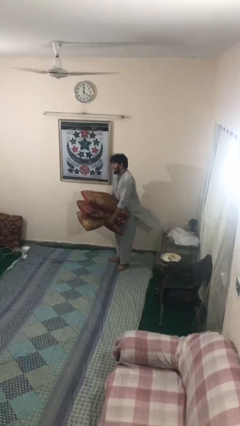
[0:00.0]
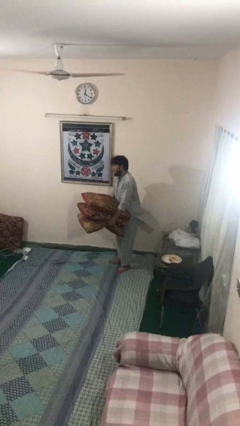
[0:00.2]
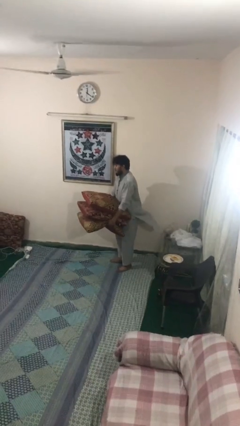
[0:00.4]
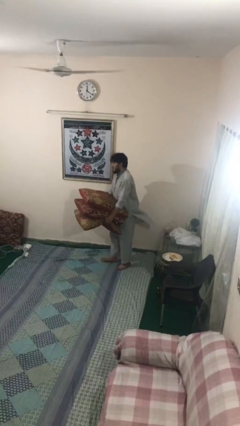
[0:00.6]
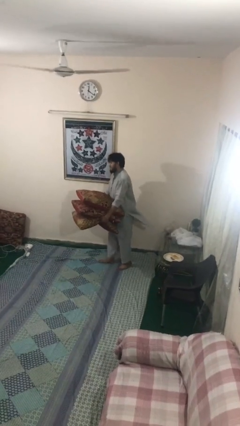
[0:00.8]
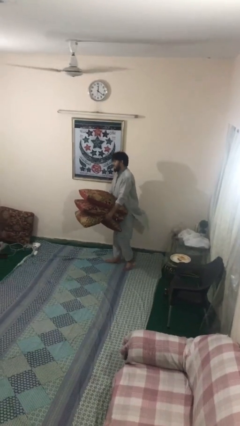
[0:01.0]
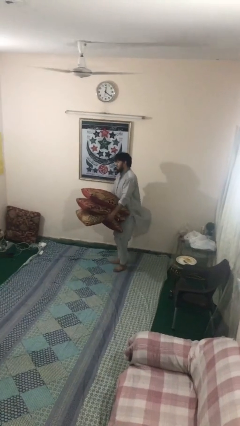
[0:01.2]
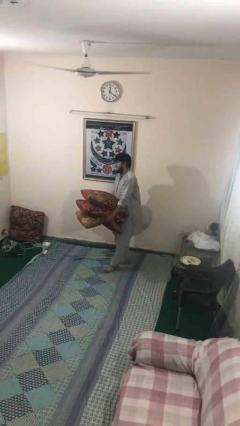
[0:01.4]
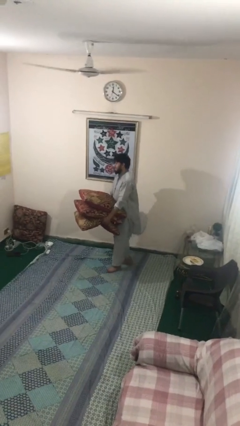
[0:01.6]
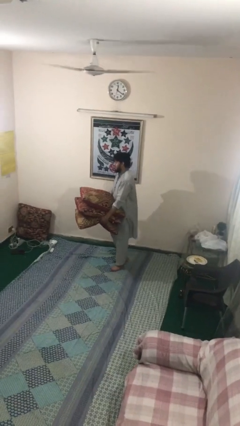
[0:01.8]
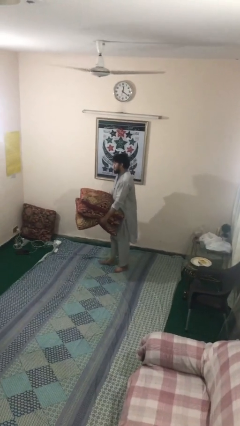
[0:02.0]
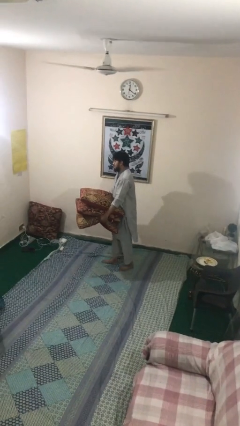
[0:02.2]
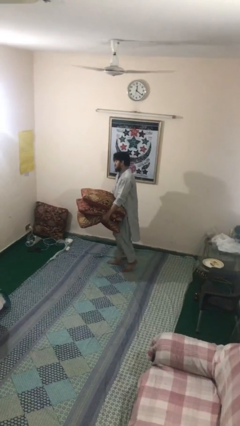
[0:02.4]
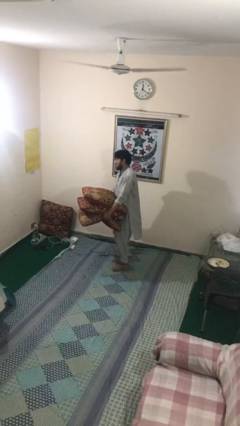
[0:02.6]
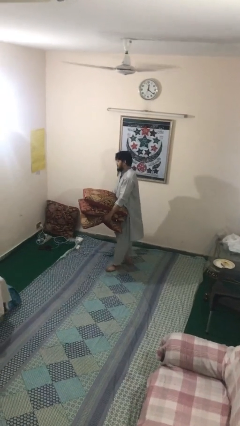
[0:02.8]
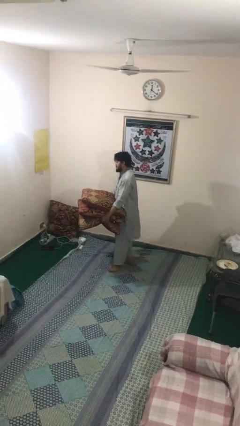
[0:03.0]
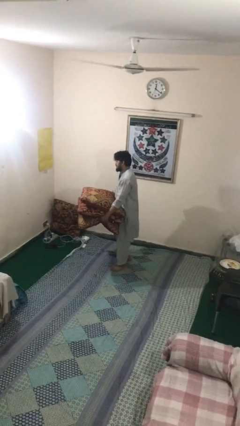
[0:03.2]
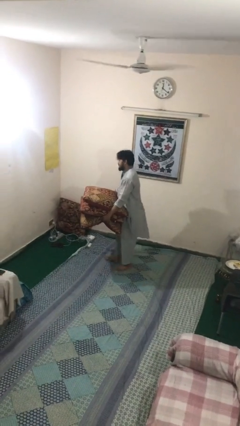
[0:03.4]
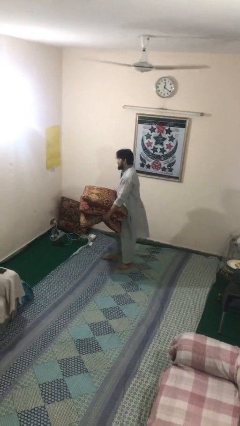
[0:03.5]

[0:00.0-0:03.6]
person carries heavy object

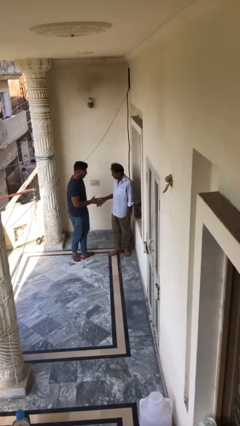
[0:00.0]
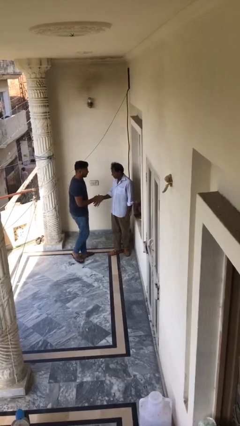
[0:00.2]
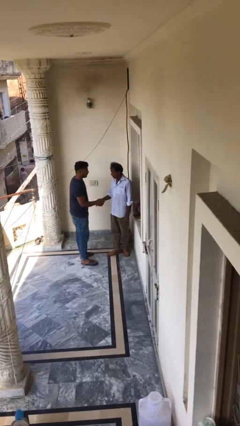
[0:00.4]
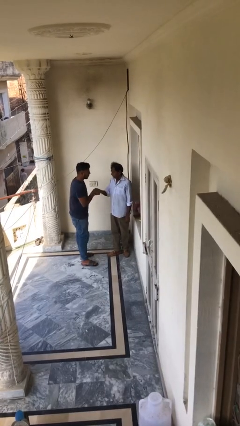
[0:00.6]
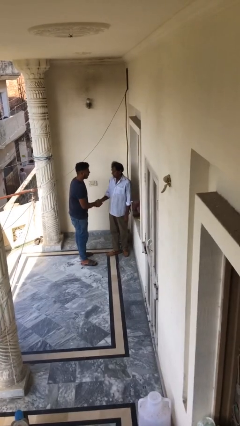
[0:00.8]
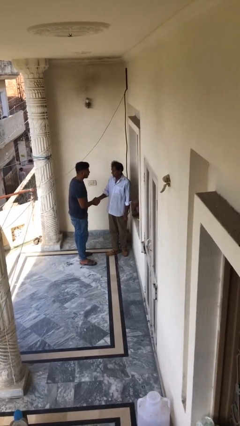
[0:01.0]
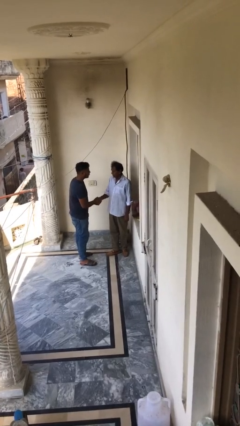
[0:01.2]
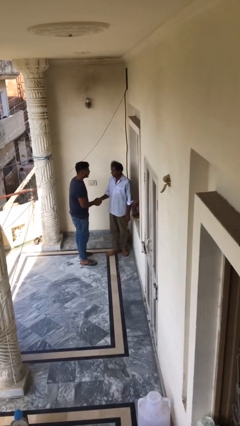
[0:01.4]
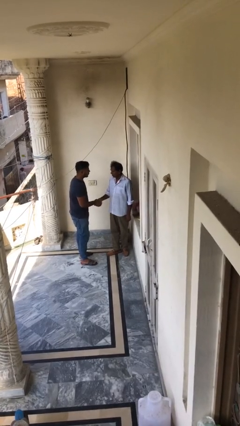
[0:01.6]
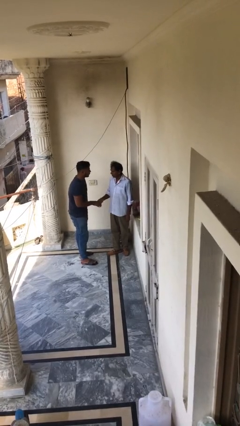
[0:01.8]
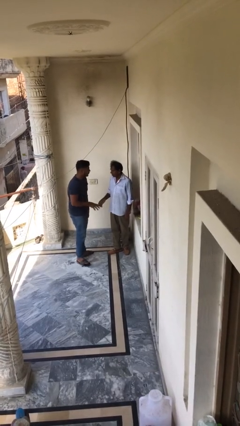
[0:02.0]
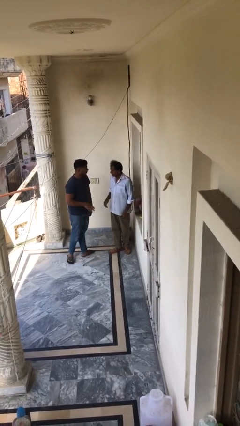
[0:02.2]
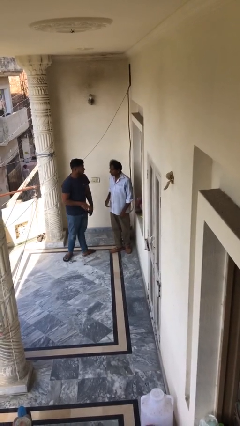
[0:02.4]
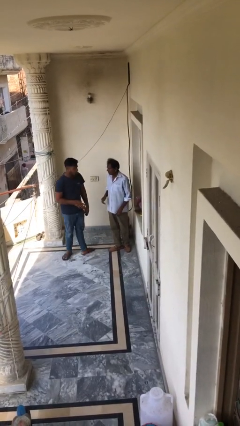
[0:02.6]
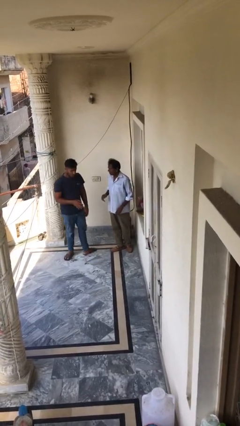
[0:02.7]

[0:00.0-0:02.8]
person shakes hand

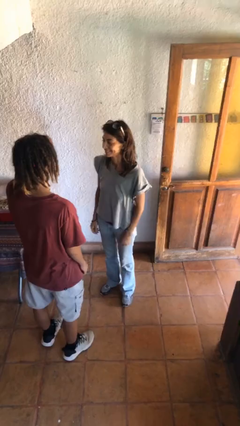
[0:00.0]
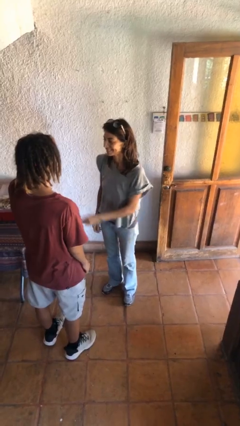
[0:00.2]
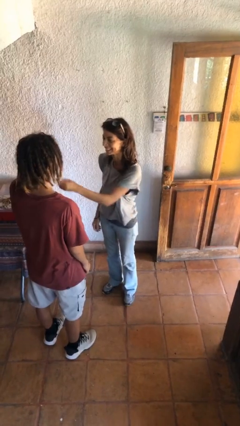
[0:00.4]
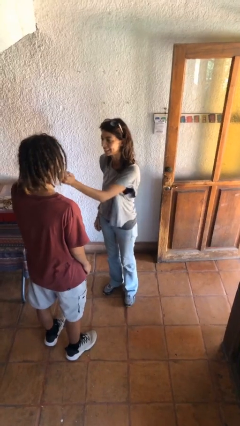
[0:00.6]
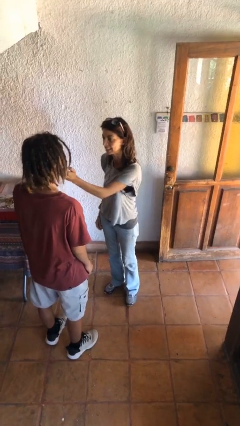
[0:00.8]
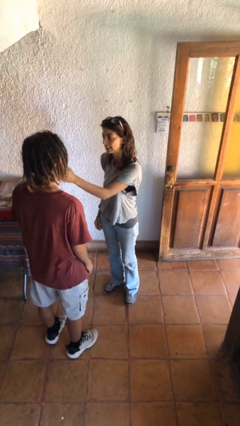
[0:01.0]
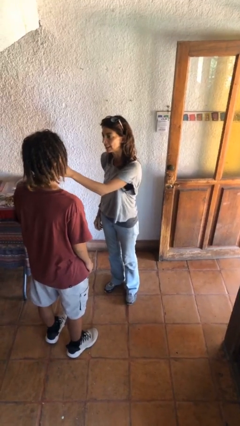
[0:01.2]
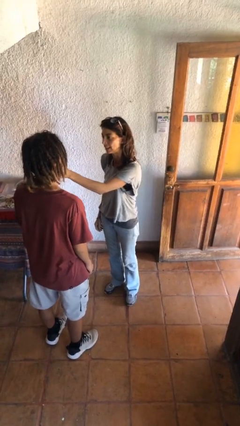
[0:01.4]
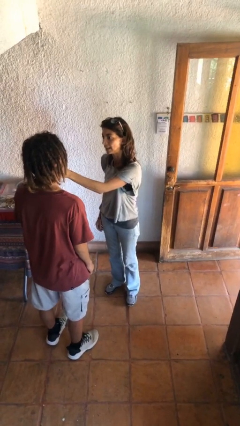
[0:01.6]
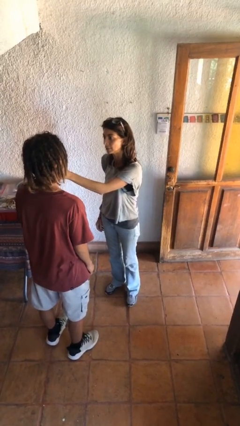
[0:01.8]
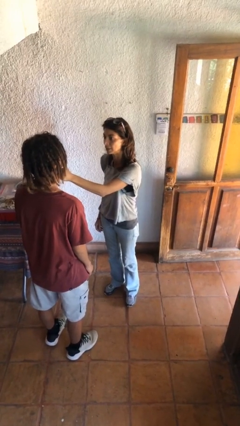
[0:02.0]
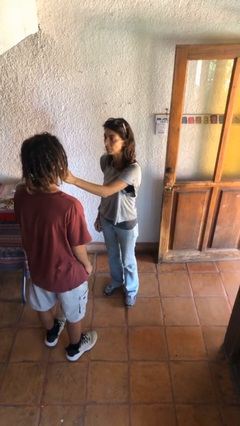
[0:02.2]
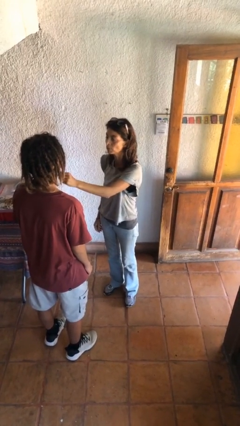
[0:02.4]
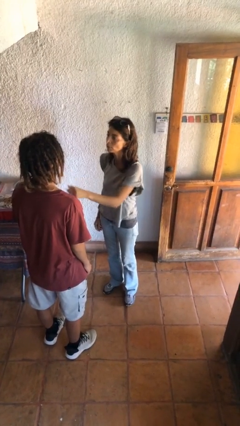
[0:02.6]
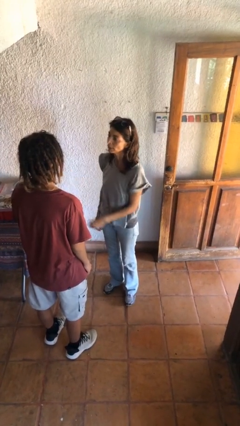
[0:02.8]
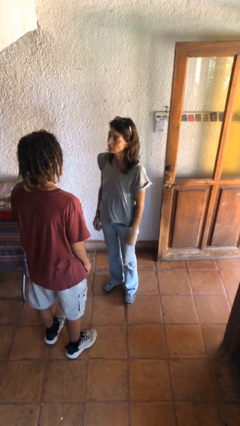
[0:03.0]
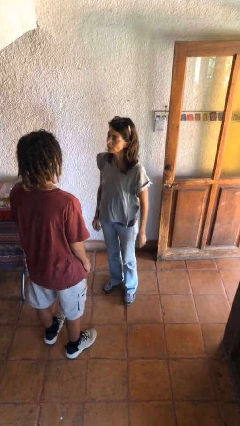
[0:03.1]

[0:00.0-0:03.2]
person touches face of person

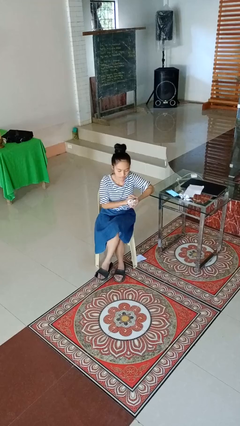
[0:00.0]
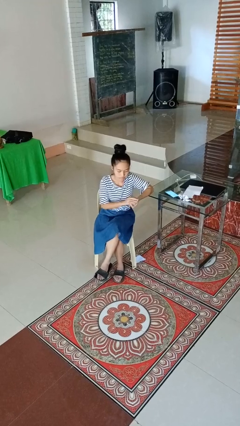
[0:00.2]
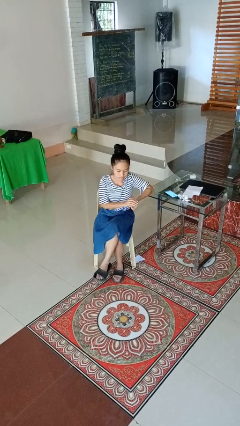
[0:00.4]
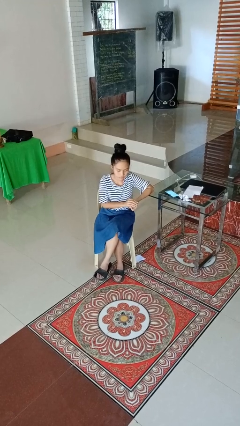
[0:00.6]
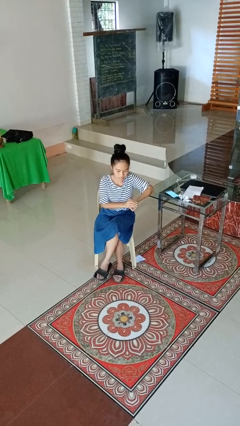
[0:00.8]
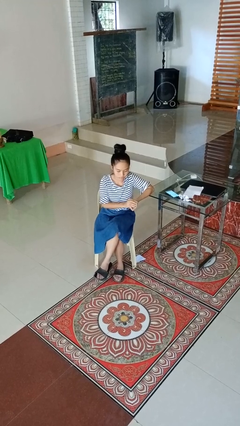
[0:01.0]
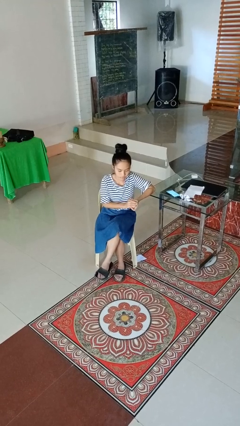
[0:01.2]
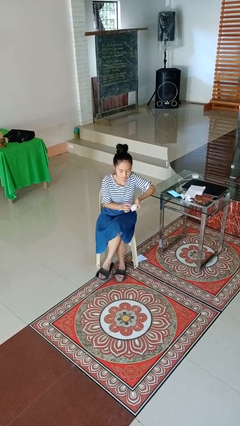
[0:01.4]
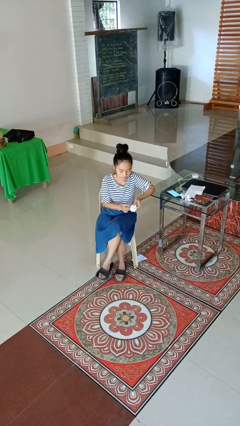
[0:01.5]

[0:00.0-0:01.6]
person crumples paper

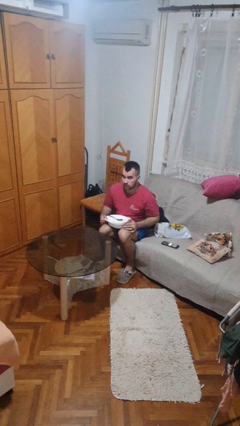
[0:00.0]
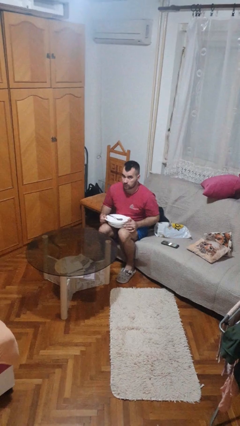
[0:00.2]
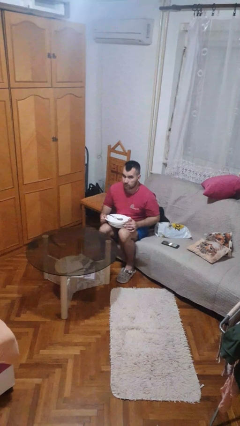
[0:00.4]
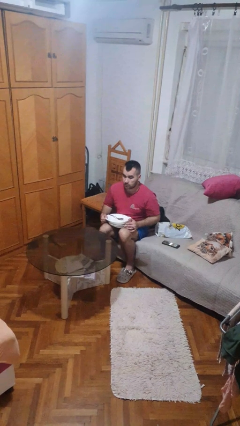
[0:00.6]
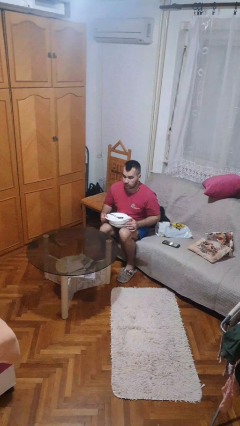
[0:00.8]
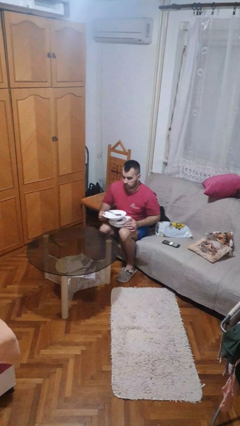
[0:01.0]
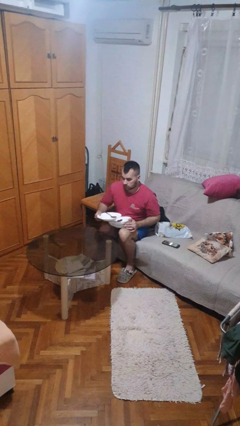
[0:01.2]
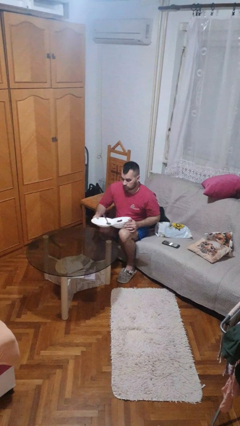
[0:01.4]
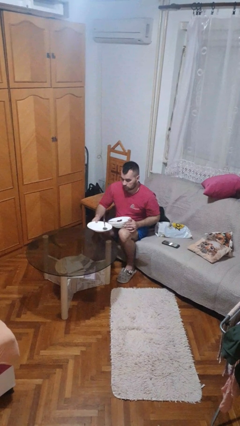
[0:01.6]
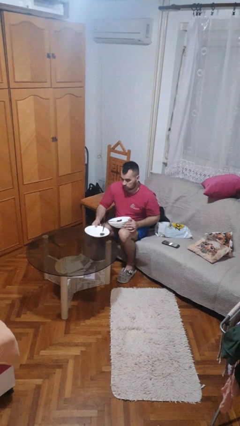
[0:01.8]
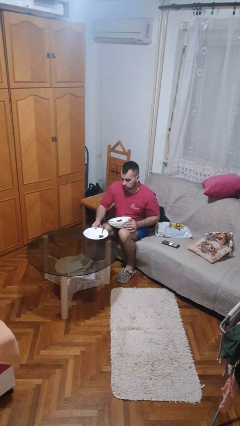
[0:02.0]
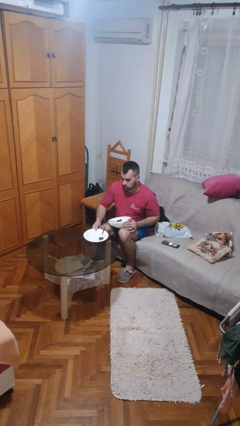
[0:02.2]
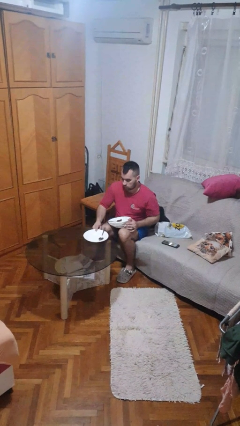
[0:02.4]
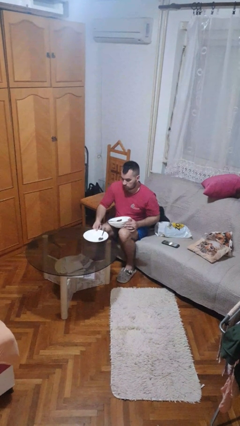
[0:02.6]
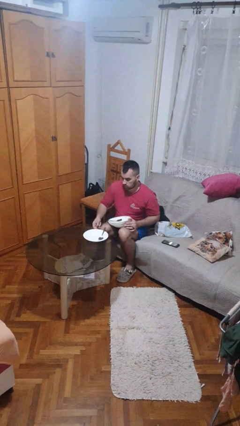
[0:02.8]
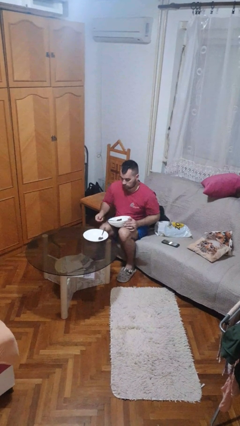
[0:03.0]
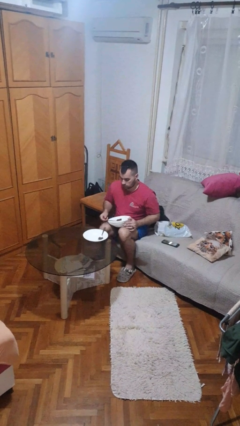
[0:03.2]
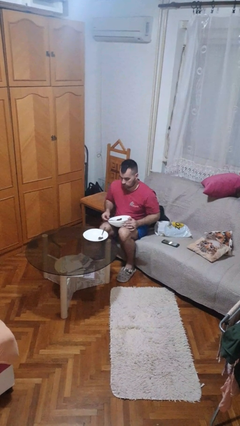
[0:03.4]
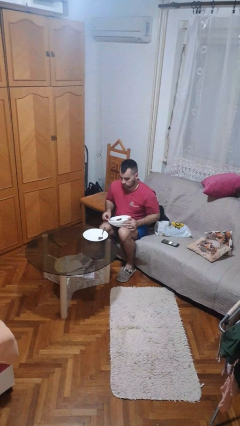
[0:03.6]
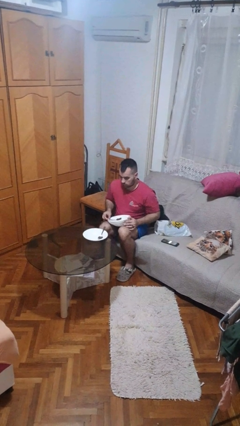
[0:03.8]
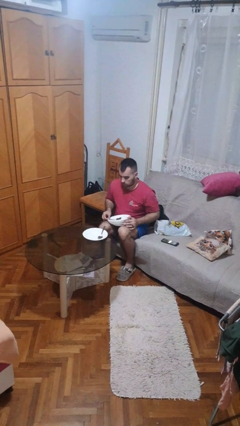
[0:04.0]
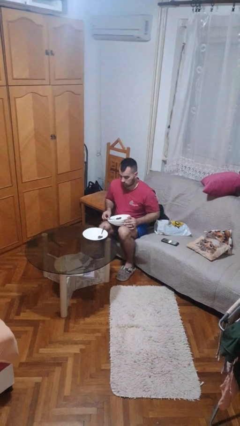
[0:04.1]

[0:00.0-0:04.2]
person sets table

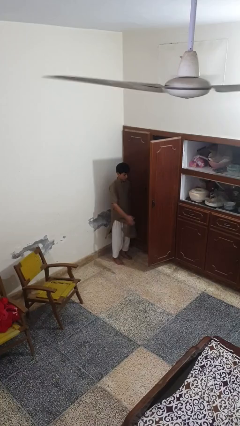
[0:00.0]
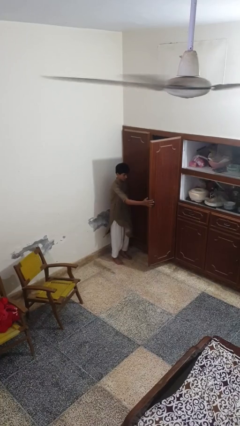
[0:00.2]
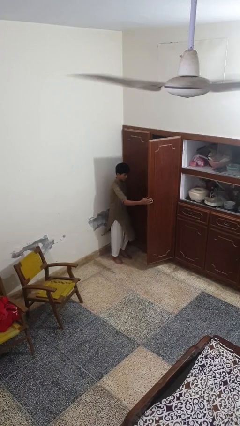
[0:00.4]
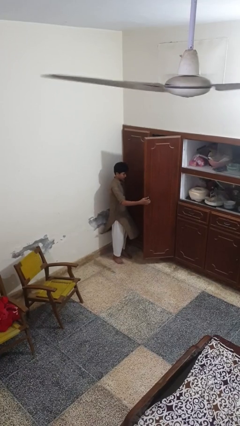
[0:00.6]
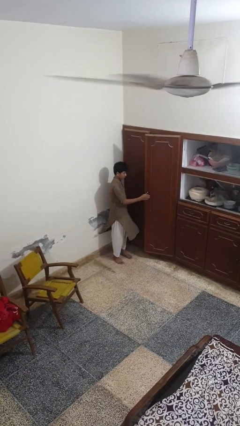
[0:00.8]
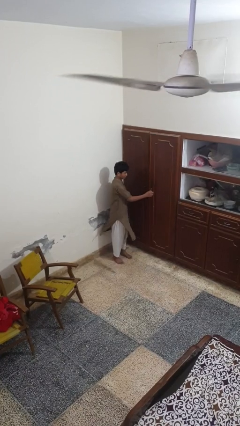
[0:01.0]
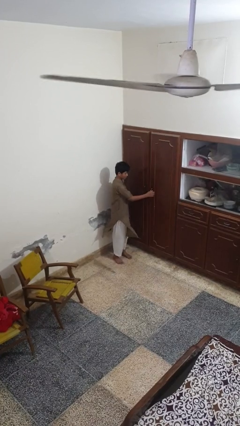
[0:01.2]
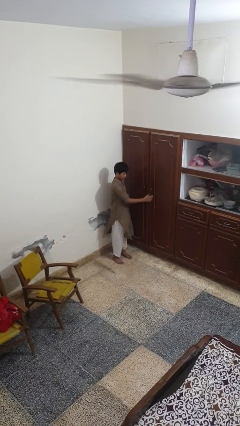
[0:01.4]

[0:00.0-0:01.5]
person closes closet door

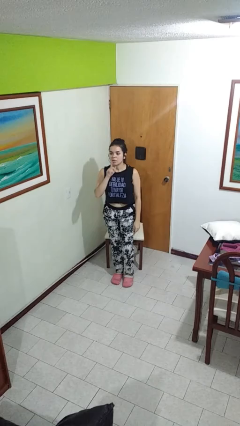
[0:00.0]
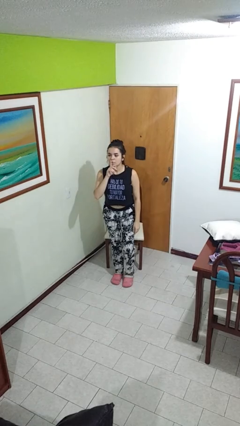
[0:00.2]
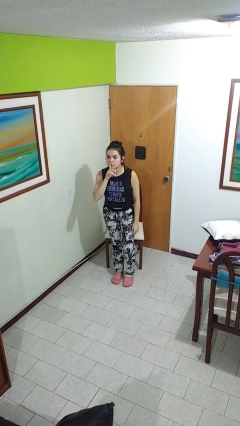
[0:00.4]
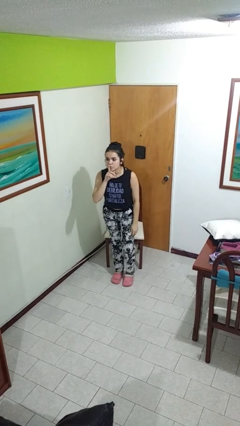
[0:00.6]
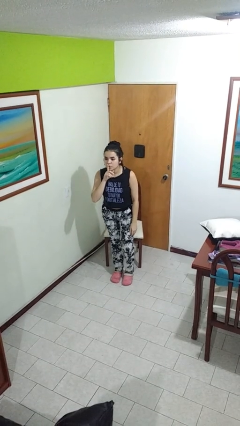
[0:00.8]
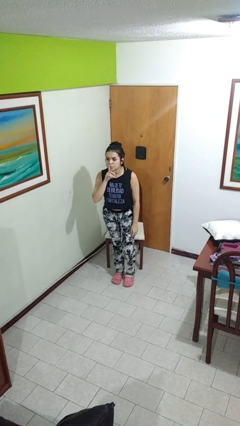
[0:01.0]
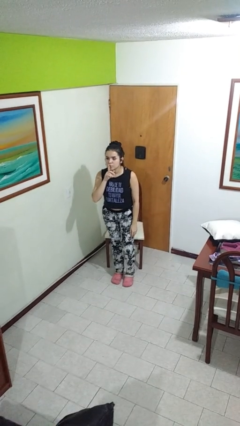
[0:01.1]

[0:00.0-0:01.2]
person gestures be quiet
